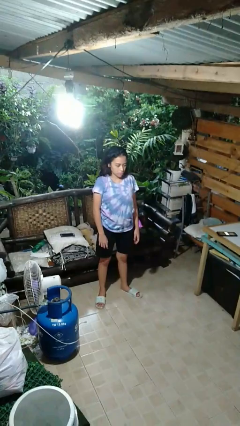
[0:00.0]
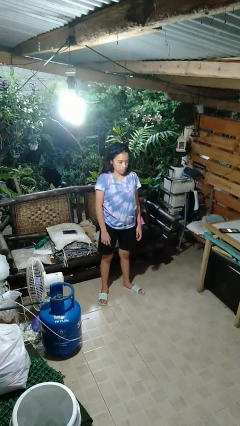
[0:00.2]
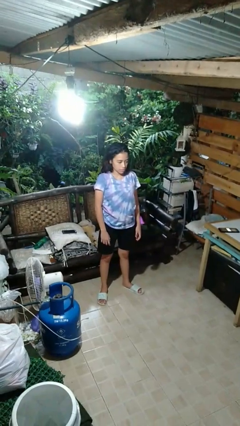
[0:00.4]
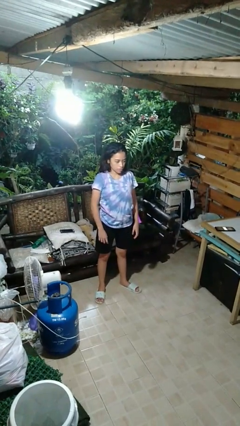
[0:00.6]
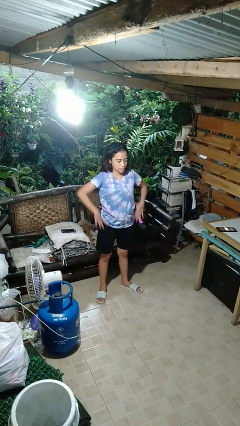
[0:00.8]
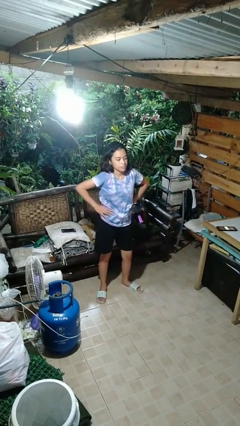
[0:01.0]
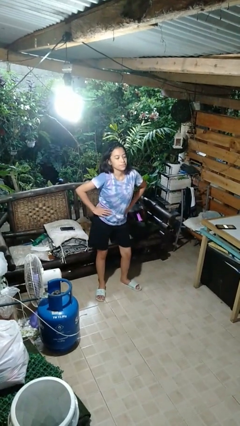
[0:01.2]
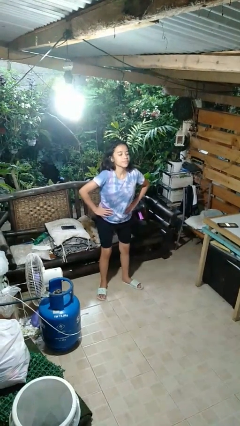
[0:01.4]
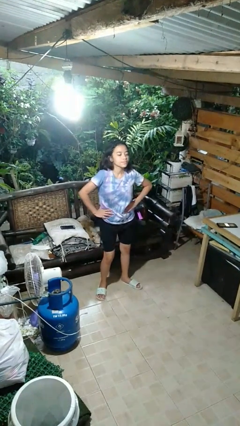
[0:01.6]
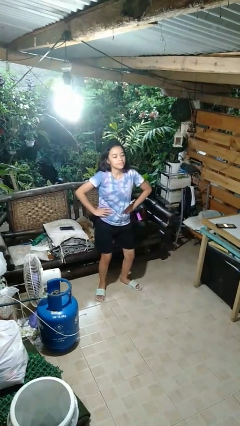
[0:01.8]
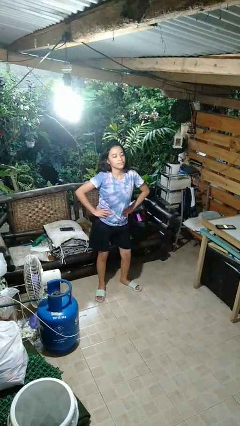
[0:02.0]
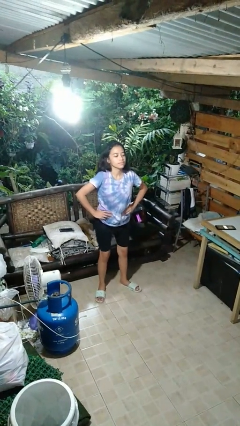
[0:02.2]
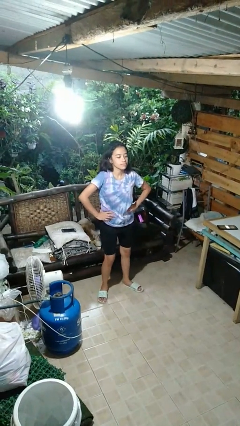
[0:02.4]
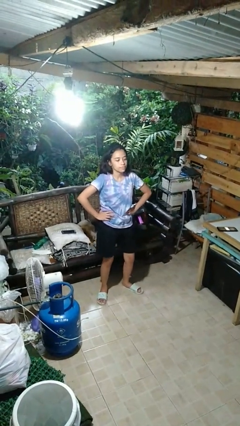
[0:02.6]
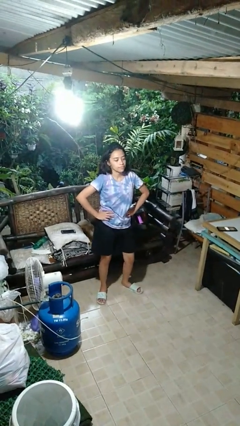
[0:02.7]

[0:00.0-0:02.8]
person wiggles hips

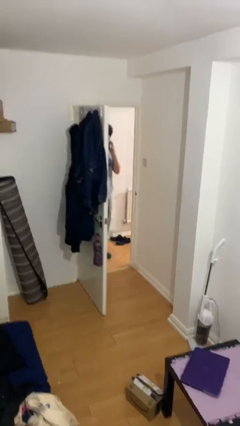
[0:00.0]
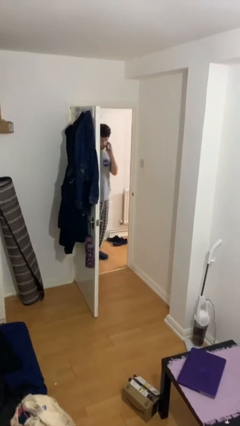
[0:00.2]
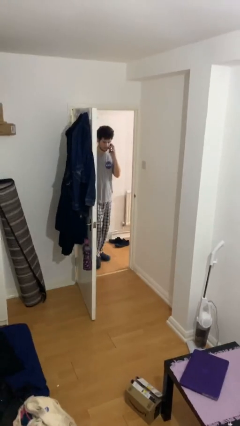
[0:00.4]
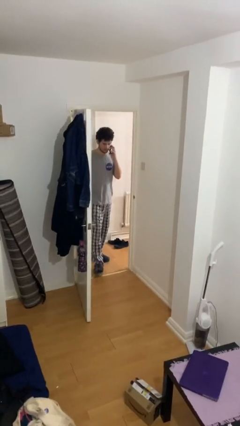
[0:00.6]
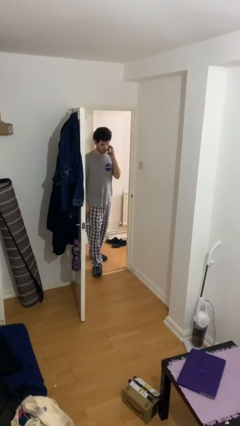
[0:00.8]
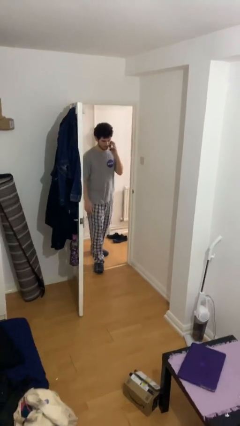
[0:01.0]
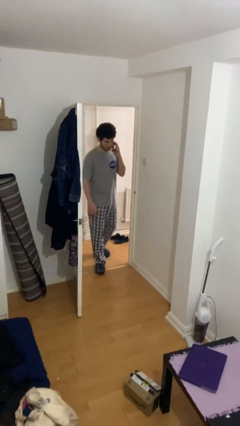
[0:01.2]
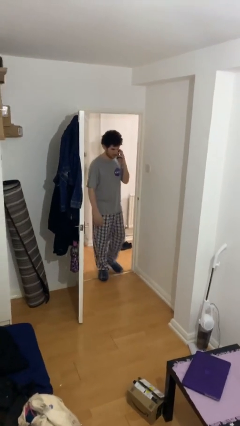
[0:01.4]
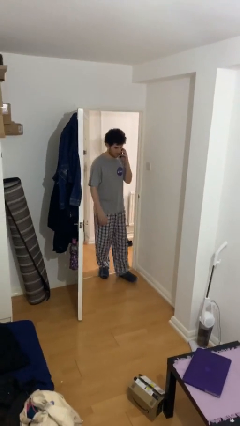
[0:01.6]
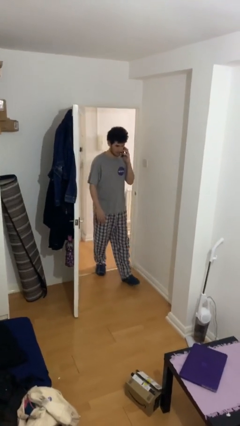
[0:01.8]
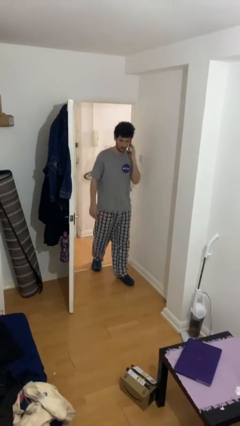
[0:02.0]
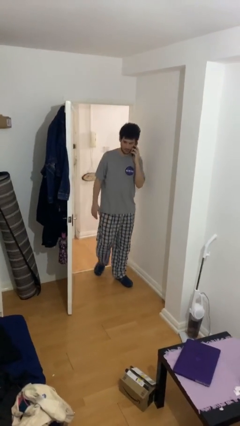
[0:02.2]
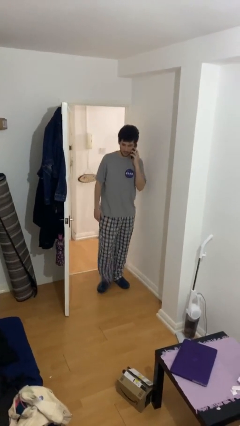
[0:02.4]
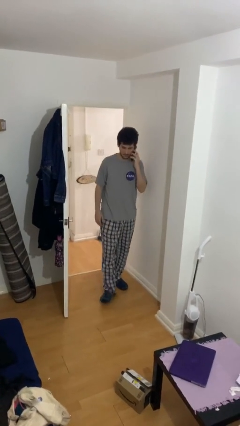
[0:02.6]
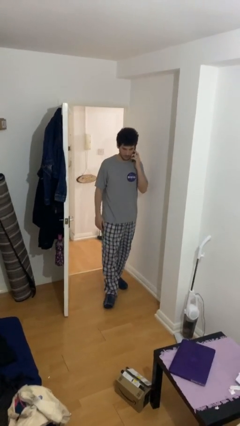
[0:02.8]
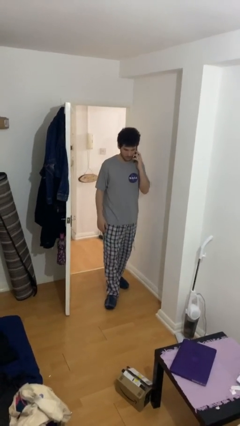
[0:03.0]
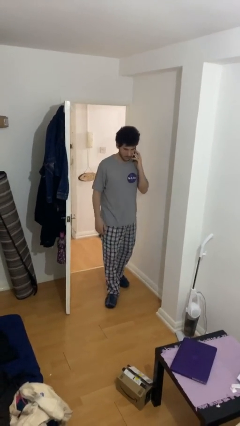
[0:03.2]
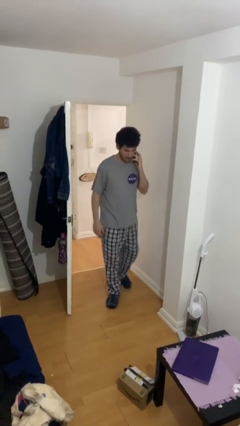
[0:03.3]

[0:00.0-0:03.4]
person enters scene through structure

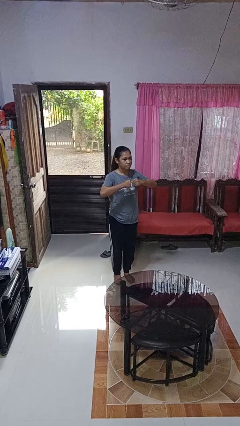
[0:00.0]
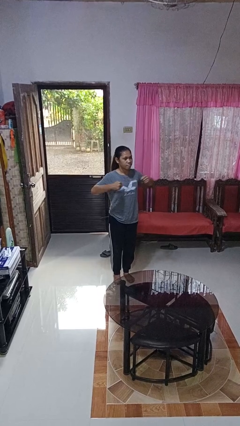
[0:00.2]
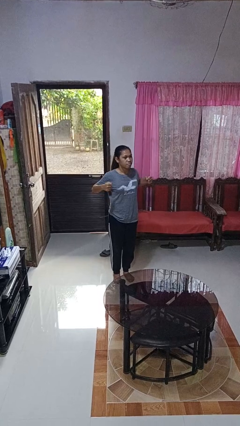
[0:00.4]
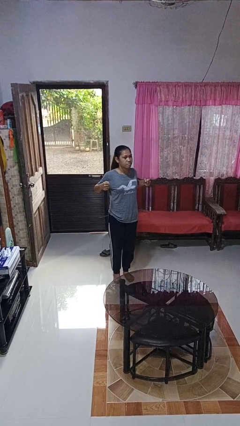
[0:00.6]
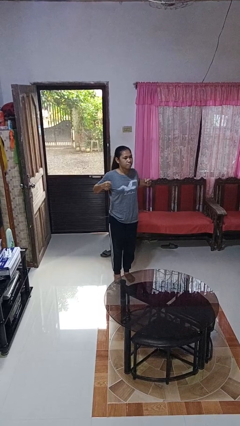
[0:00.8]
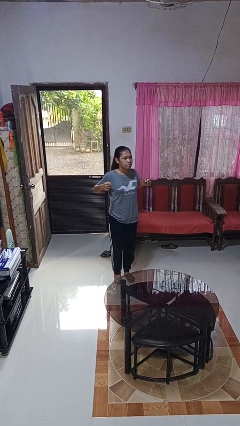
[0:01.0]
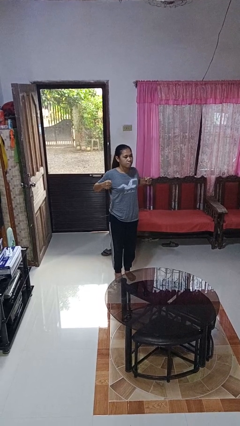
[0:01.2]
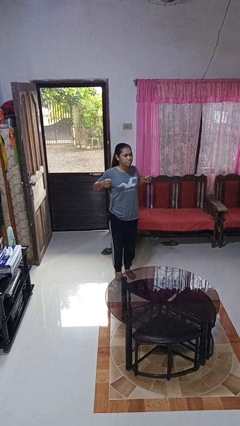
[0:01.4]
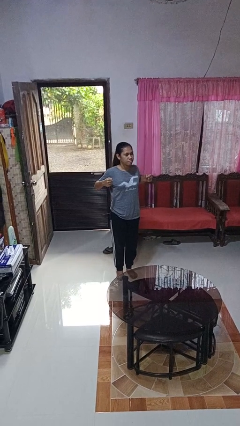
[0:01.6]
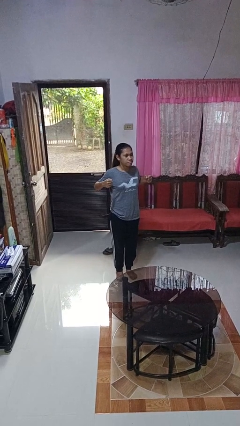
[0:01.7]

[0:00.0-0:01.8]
person gestures zoom in

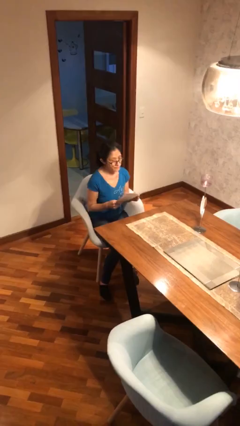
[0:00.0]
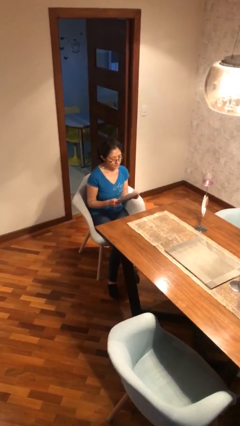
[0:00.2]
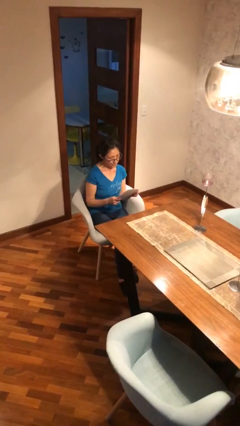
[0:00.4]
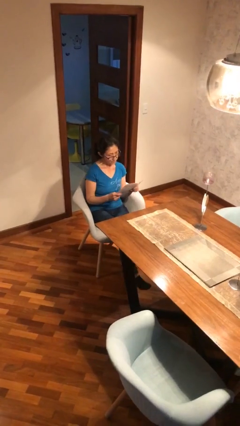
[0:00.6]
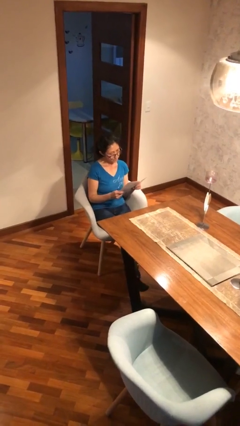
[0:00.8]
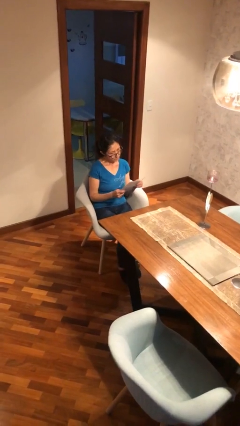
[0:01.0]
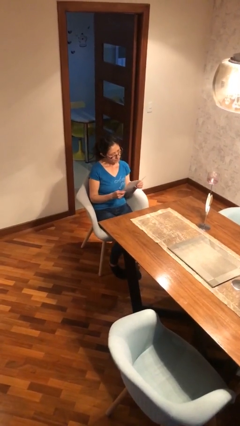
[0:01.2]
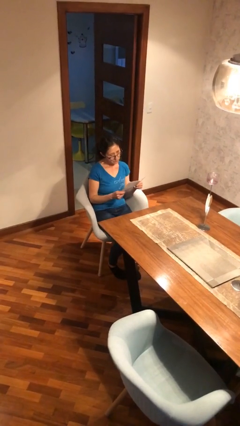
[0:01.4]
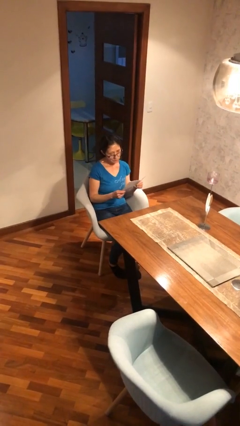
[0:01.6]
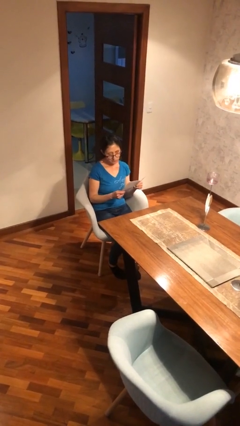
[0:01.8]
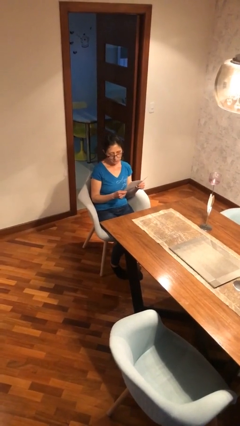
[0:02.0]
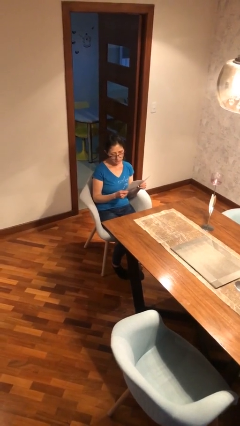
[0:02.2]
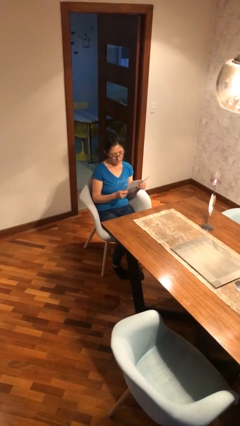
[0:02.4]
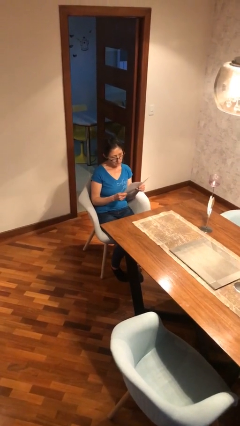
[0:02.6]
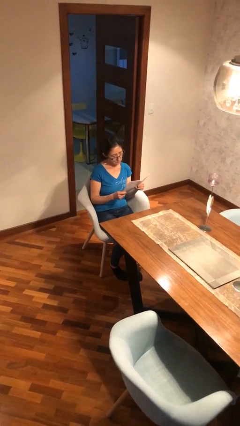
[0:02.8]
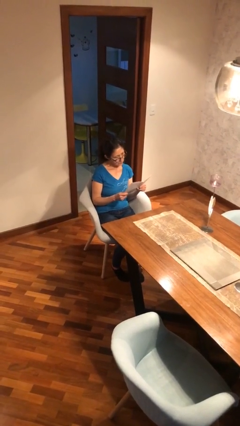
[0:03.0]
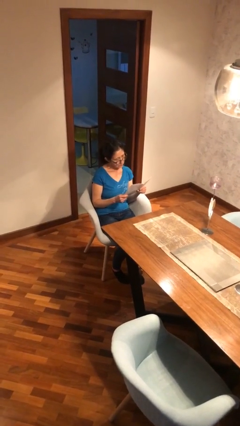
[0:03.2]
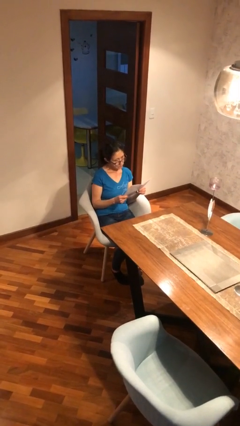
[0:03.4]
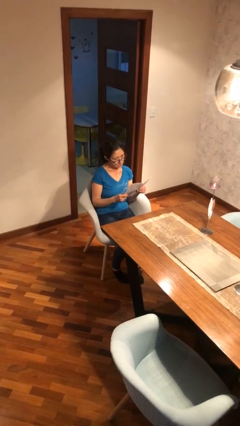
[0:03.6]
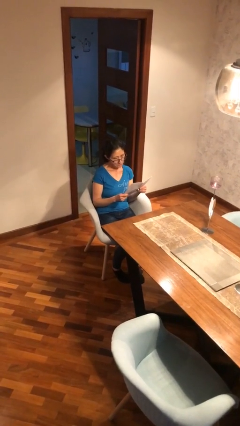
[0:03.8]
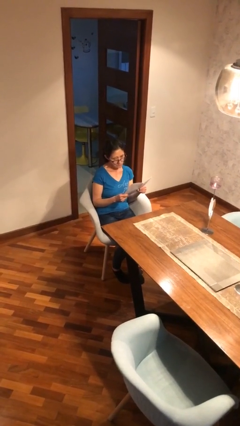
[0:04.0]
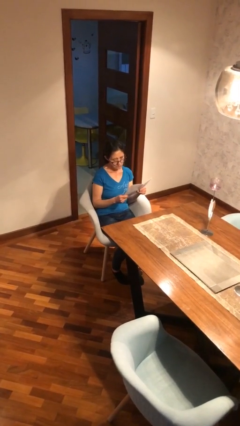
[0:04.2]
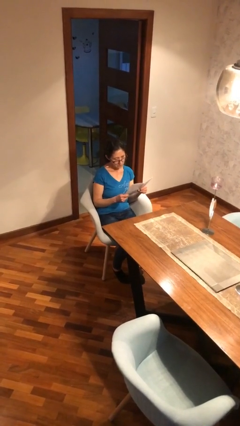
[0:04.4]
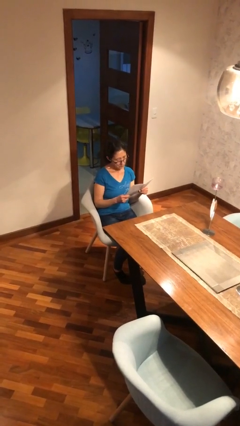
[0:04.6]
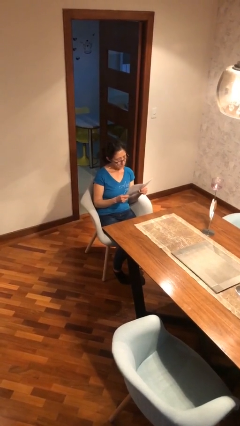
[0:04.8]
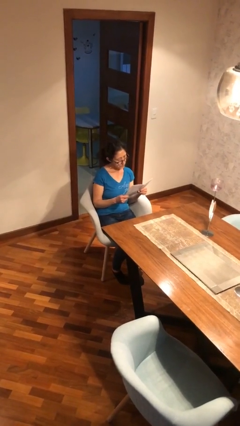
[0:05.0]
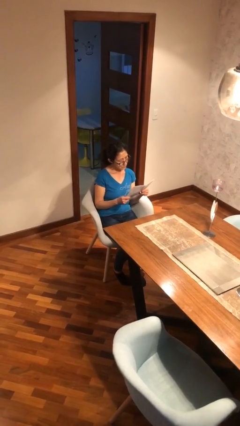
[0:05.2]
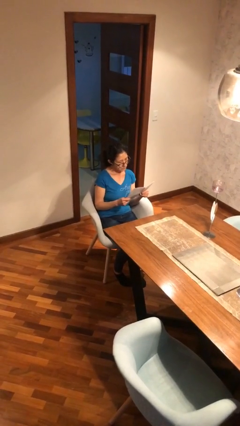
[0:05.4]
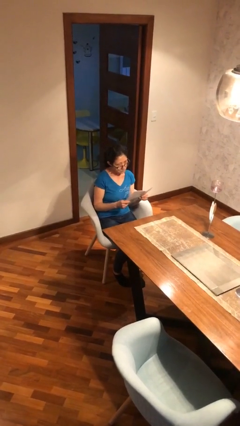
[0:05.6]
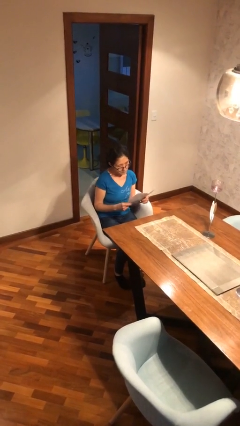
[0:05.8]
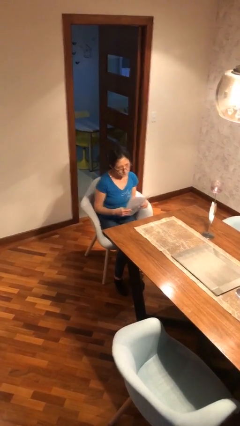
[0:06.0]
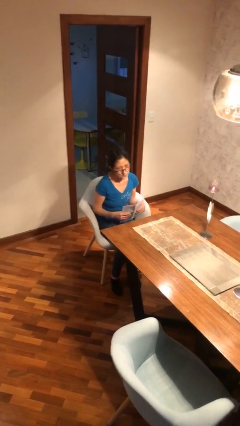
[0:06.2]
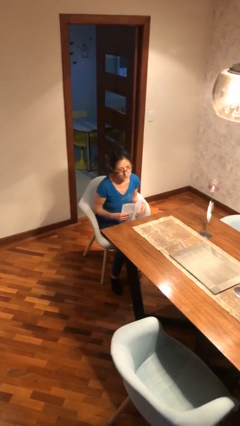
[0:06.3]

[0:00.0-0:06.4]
person reads document

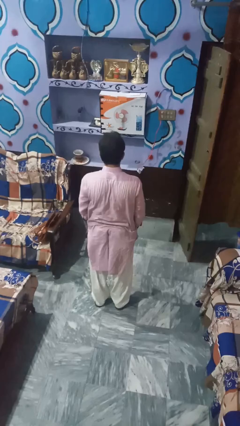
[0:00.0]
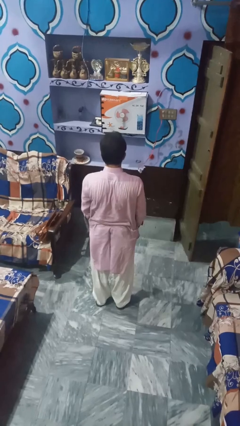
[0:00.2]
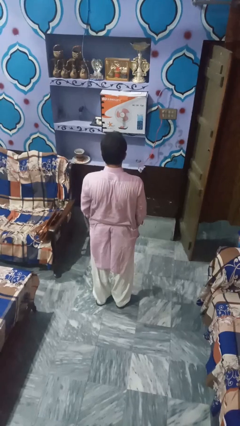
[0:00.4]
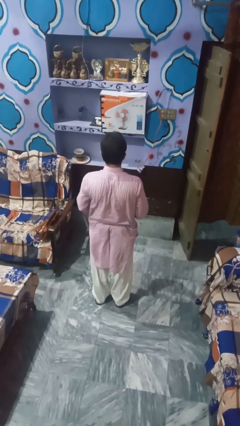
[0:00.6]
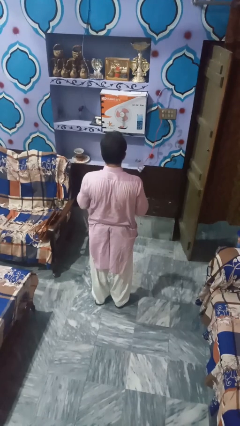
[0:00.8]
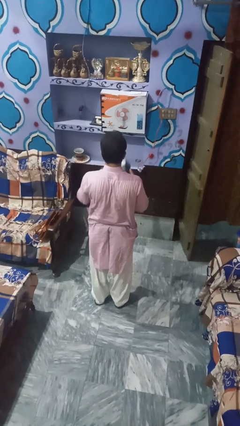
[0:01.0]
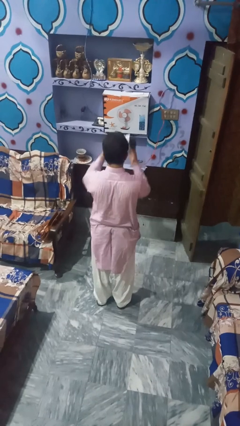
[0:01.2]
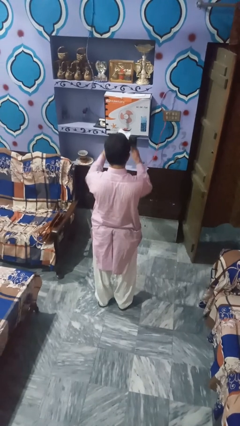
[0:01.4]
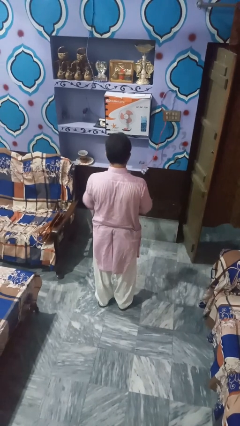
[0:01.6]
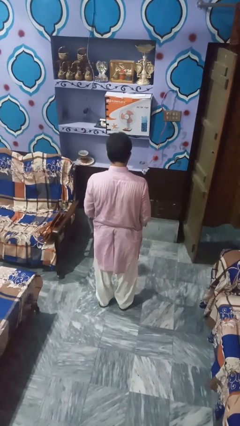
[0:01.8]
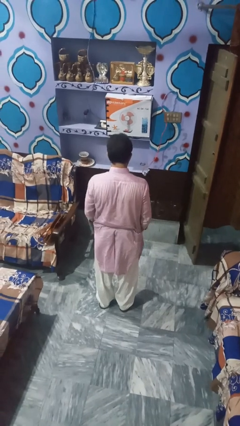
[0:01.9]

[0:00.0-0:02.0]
person drops object

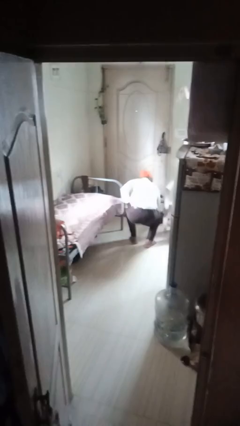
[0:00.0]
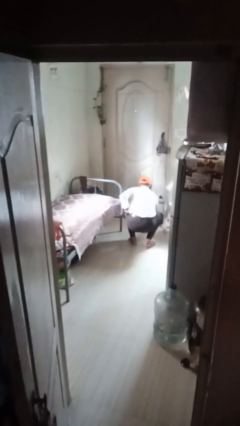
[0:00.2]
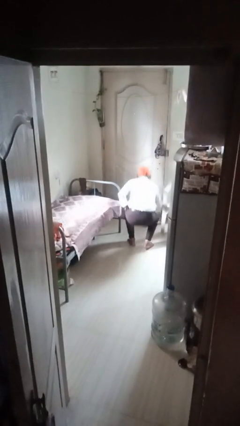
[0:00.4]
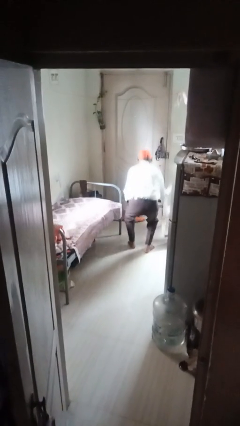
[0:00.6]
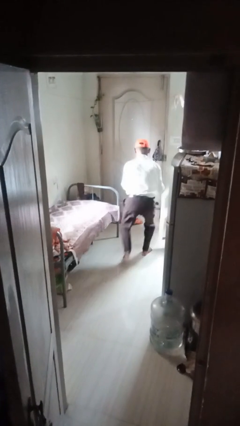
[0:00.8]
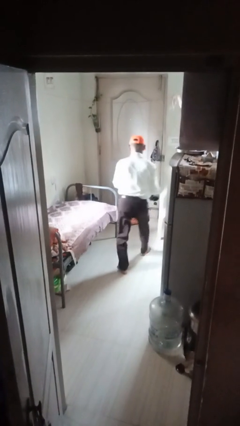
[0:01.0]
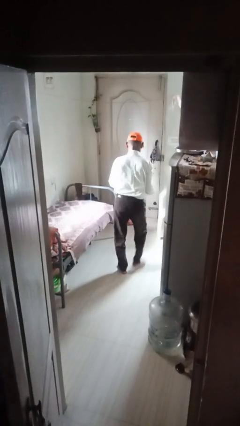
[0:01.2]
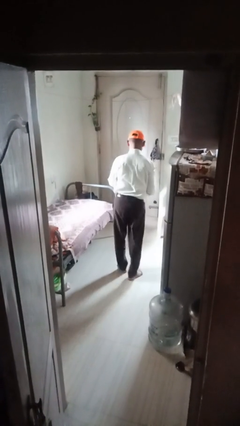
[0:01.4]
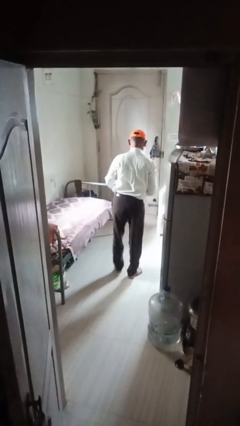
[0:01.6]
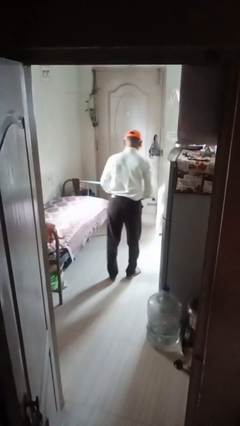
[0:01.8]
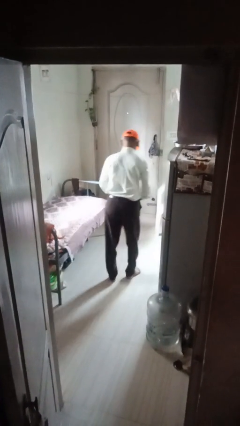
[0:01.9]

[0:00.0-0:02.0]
person picks up object from floor
